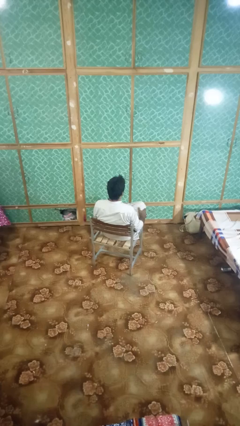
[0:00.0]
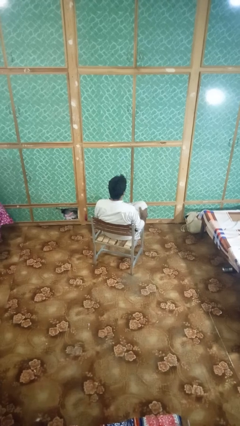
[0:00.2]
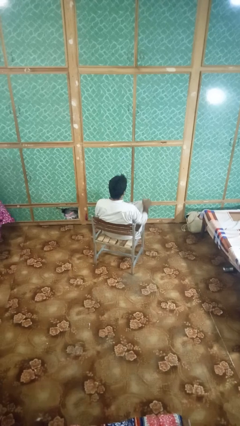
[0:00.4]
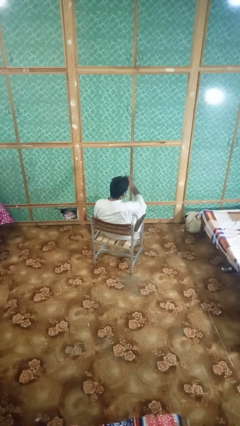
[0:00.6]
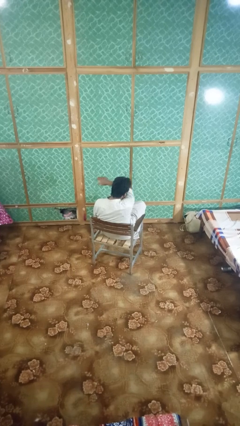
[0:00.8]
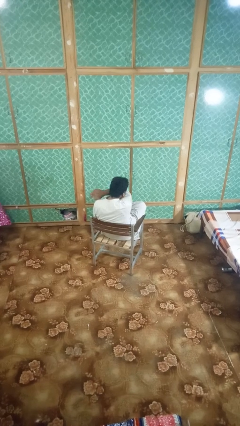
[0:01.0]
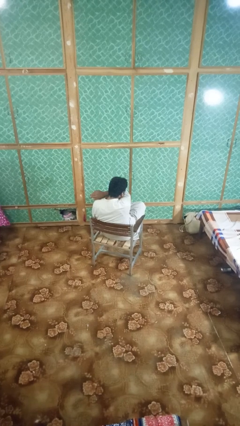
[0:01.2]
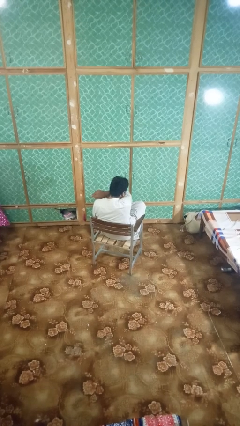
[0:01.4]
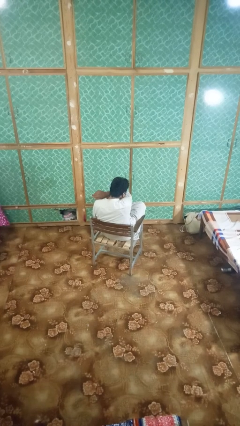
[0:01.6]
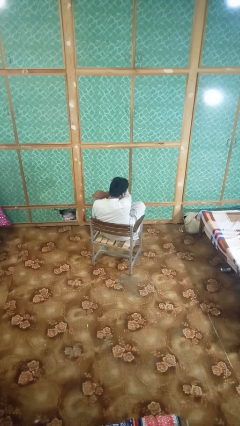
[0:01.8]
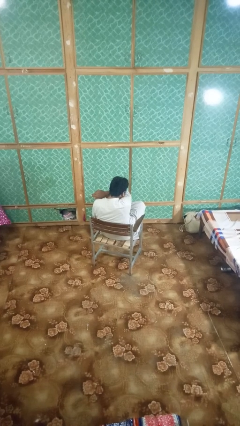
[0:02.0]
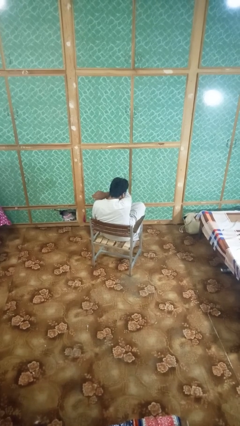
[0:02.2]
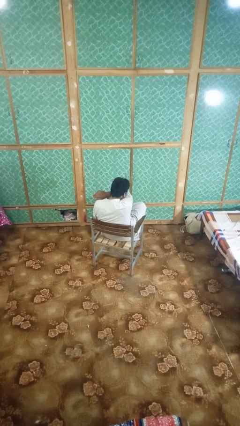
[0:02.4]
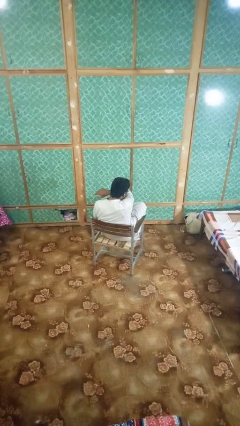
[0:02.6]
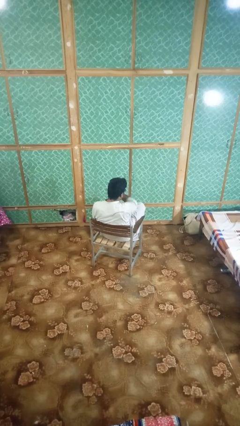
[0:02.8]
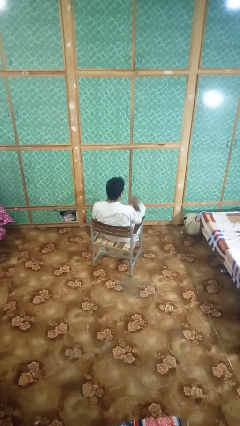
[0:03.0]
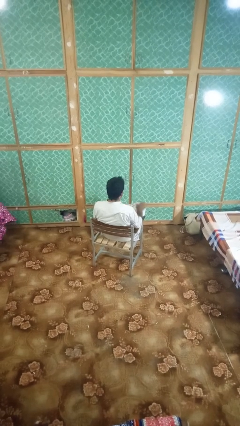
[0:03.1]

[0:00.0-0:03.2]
person sneezes into arm

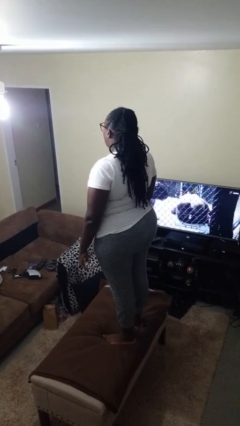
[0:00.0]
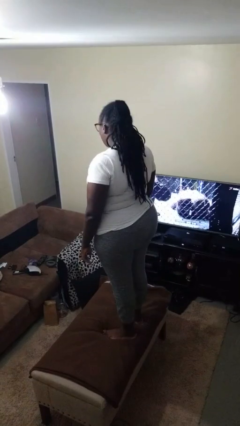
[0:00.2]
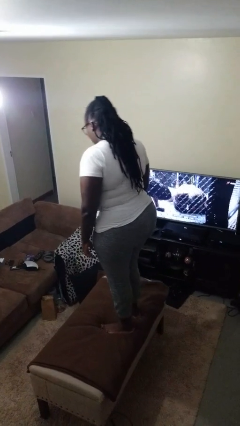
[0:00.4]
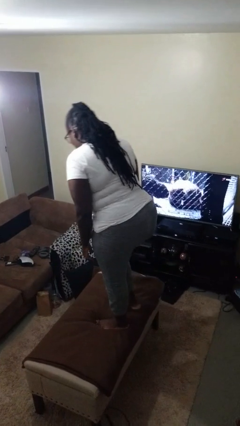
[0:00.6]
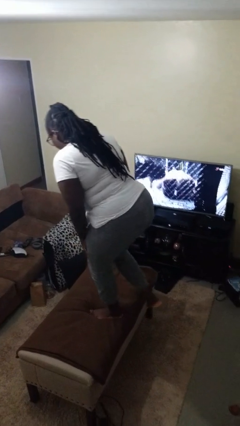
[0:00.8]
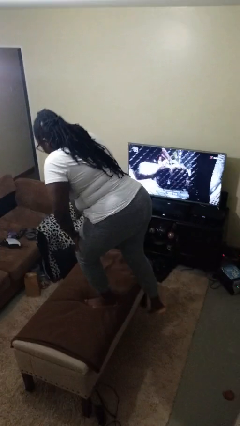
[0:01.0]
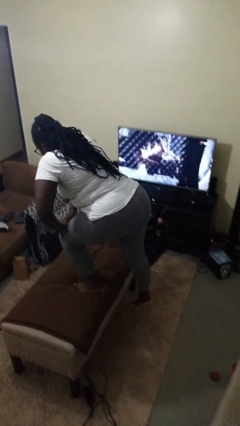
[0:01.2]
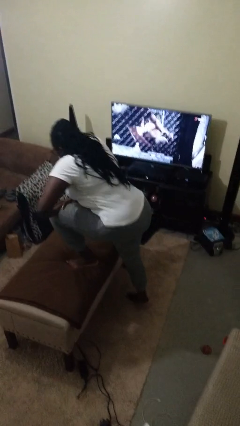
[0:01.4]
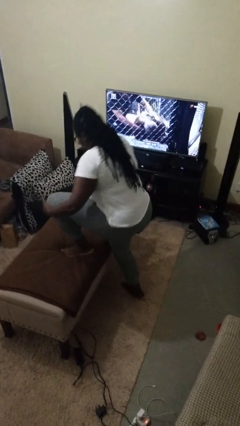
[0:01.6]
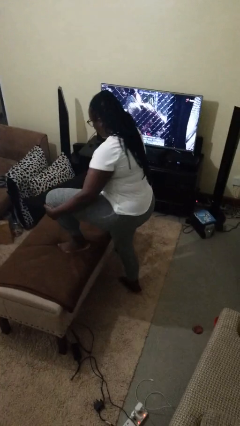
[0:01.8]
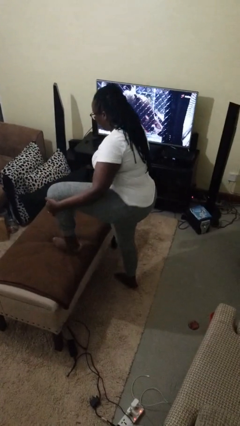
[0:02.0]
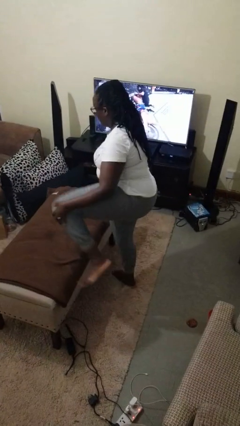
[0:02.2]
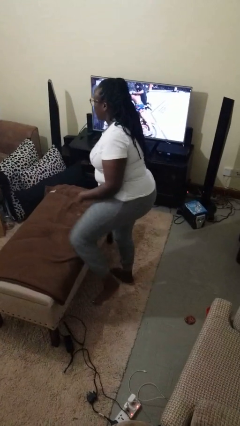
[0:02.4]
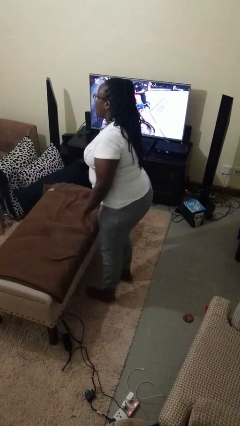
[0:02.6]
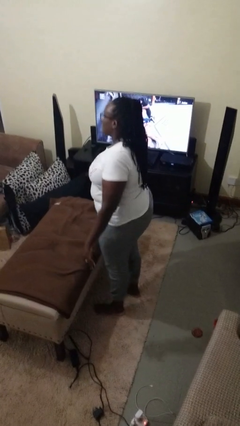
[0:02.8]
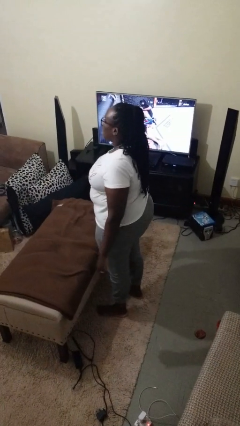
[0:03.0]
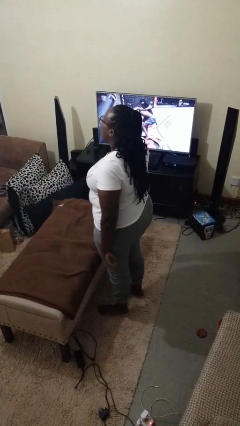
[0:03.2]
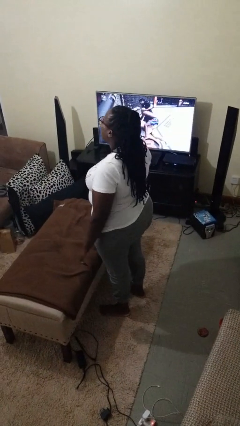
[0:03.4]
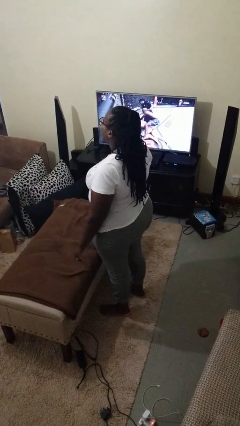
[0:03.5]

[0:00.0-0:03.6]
person climbs off table

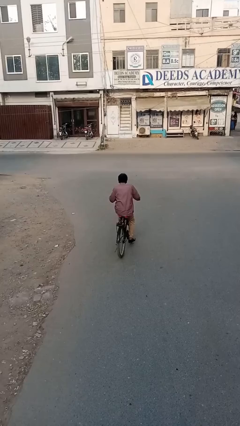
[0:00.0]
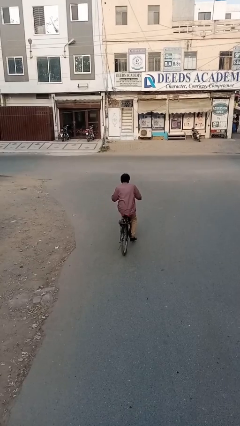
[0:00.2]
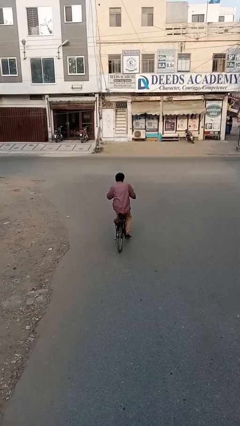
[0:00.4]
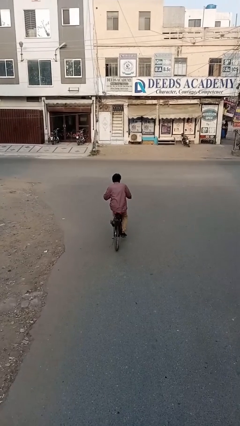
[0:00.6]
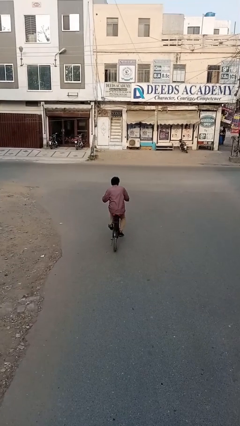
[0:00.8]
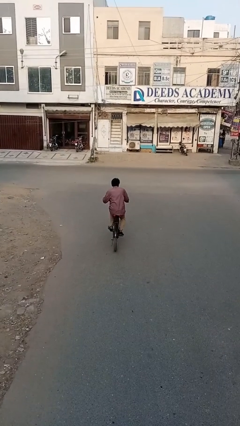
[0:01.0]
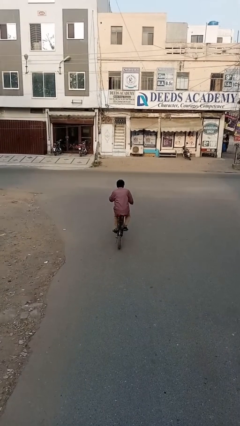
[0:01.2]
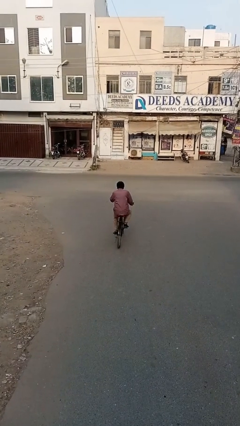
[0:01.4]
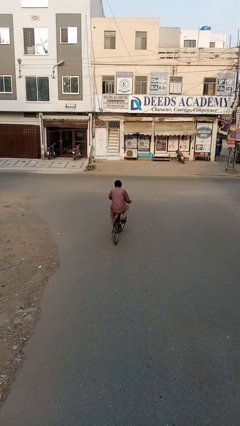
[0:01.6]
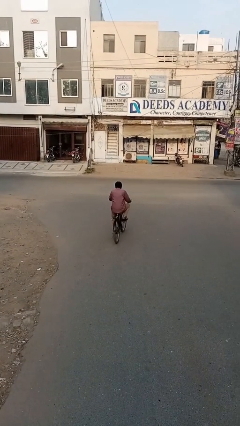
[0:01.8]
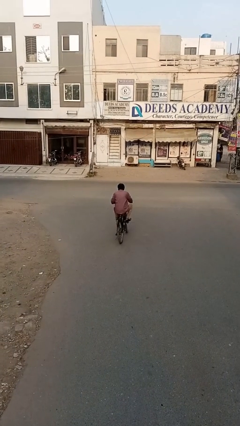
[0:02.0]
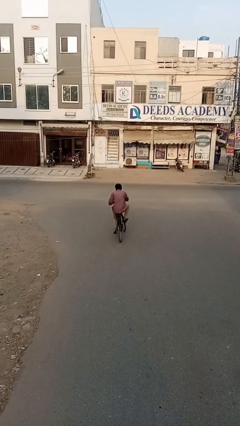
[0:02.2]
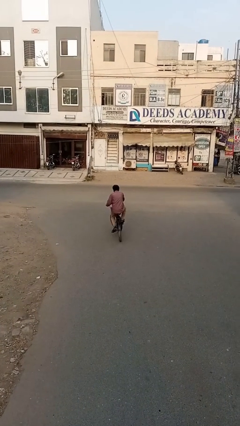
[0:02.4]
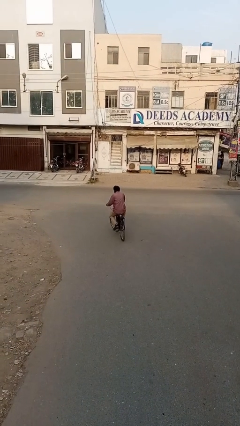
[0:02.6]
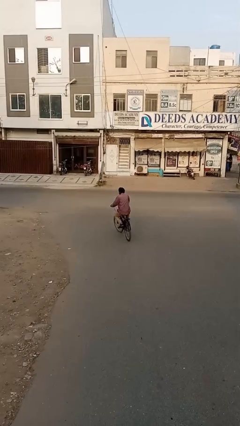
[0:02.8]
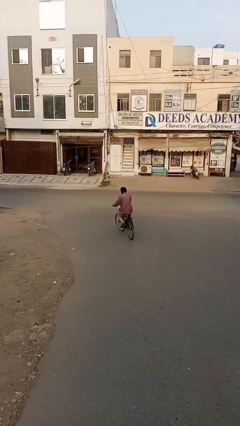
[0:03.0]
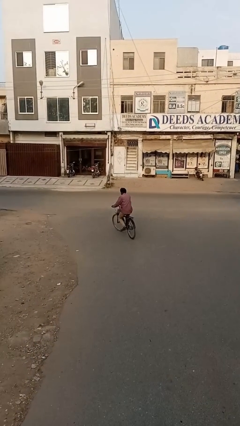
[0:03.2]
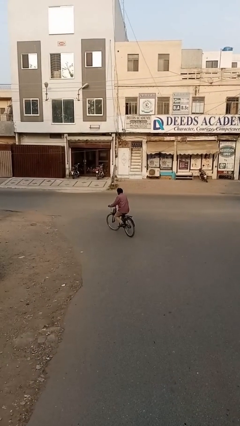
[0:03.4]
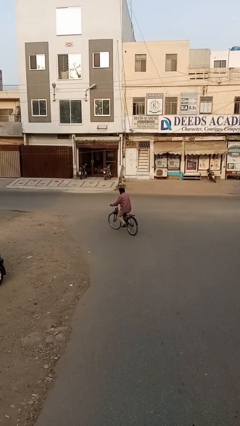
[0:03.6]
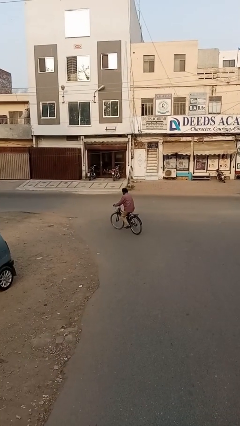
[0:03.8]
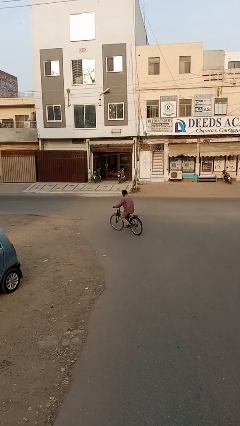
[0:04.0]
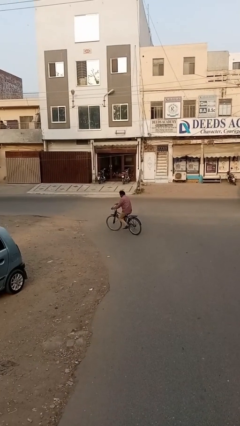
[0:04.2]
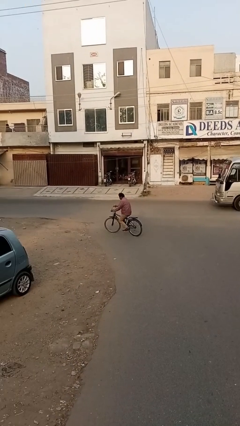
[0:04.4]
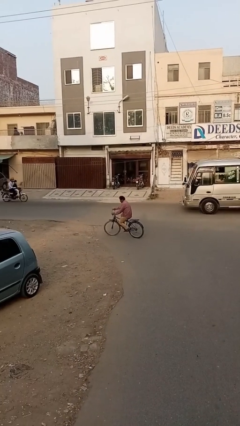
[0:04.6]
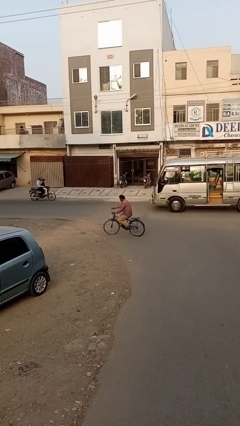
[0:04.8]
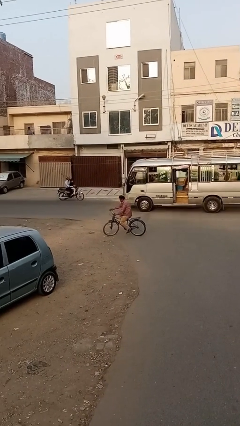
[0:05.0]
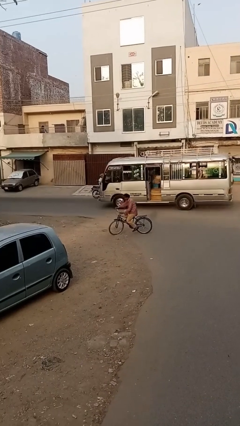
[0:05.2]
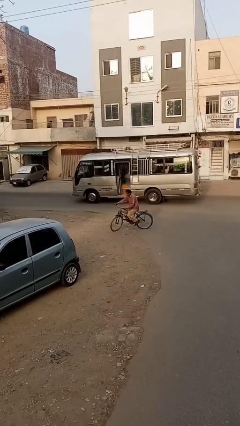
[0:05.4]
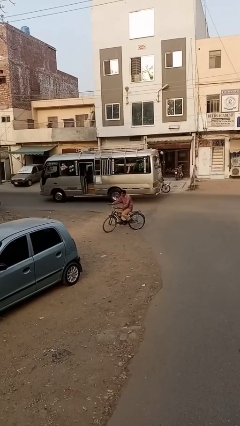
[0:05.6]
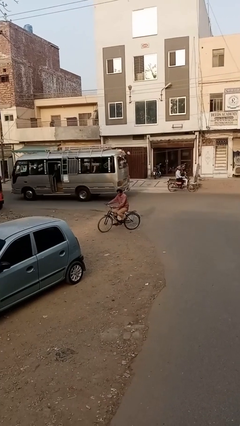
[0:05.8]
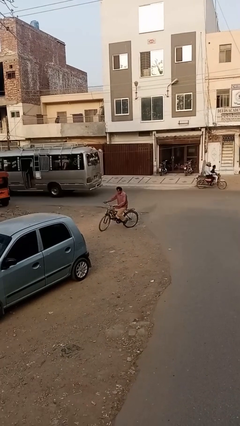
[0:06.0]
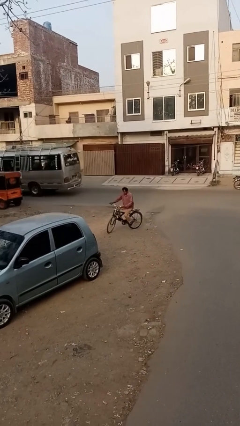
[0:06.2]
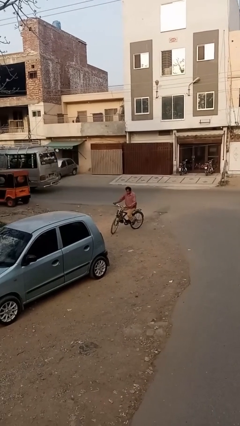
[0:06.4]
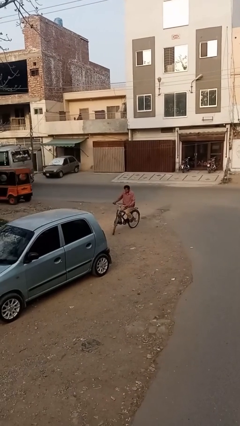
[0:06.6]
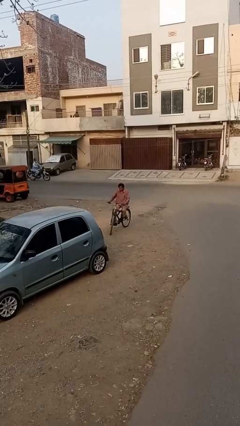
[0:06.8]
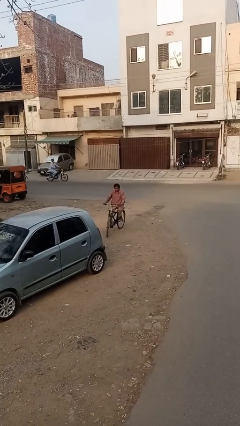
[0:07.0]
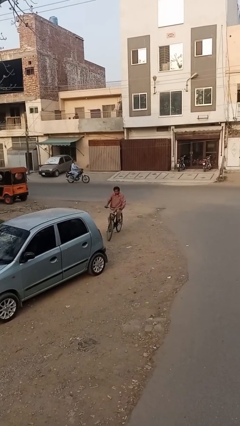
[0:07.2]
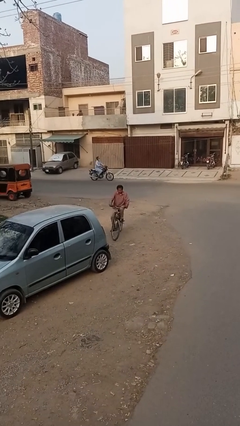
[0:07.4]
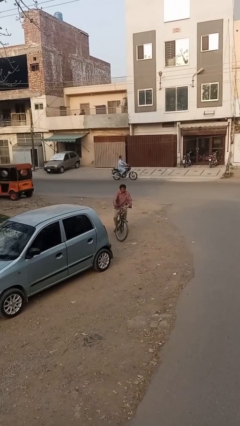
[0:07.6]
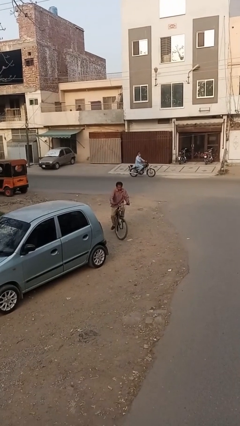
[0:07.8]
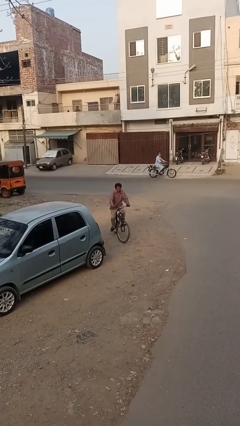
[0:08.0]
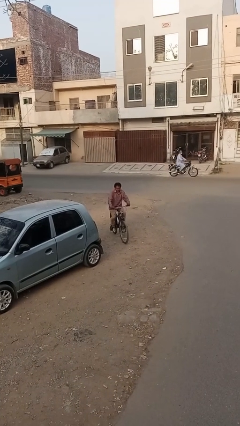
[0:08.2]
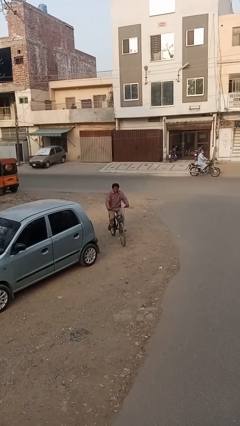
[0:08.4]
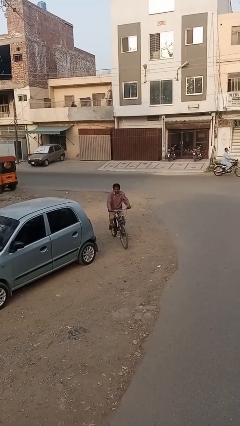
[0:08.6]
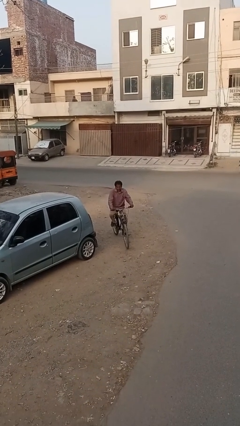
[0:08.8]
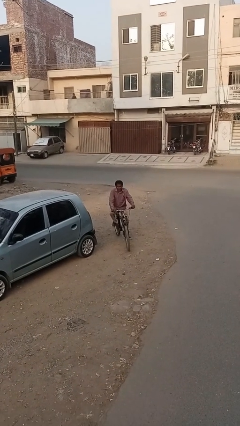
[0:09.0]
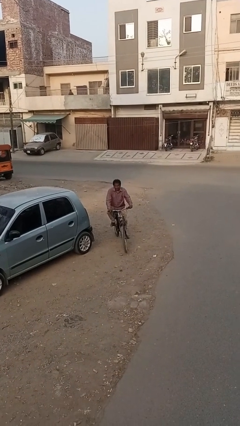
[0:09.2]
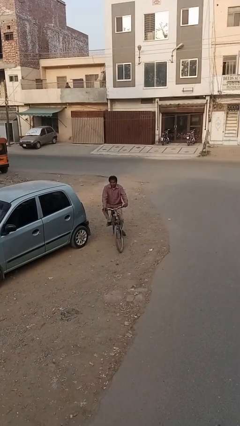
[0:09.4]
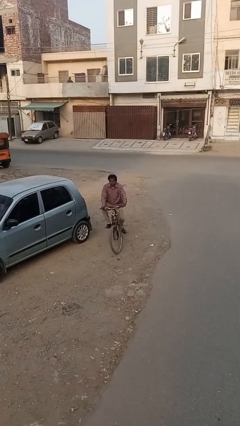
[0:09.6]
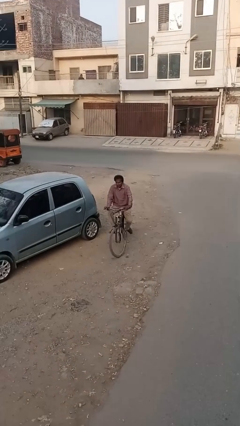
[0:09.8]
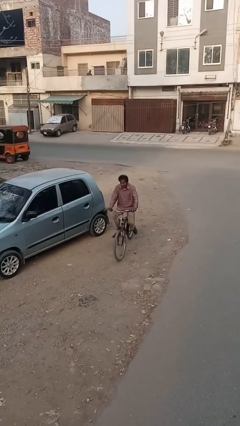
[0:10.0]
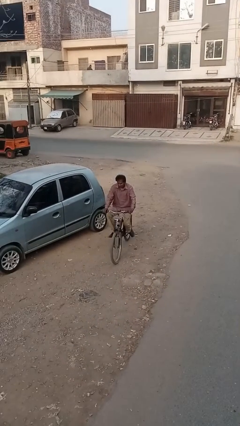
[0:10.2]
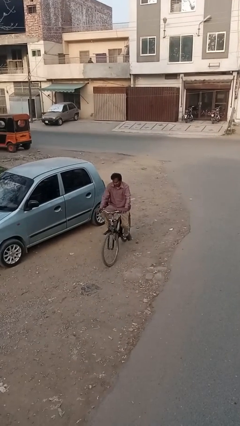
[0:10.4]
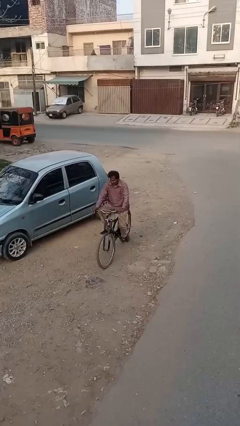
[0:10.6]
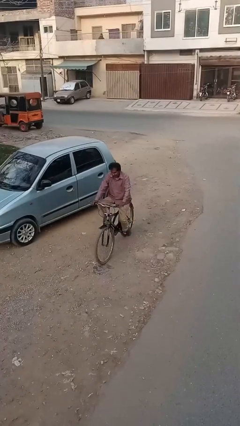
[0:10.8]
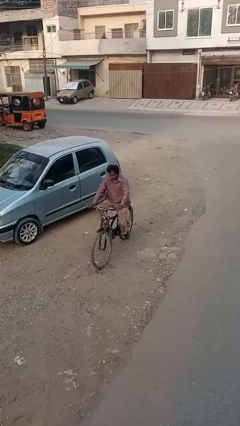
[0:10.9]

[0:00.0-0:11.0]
person rides bicycle

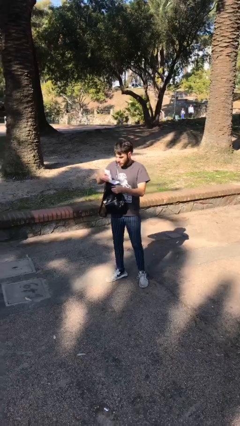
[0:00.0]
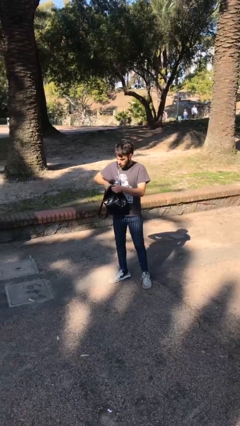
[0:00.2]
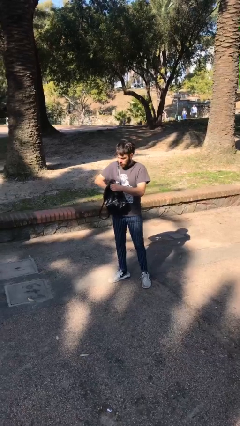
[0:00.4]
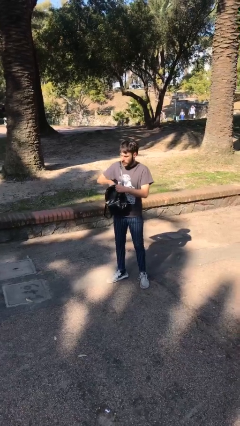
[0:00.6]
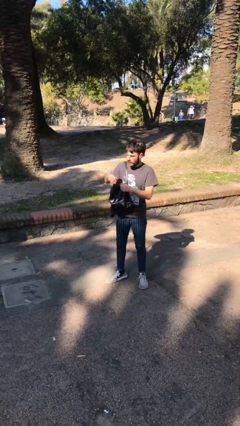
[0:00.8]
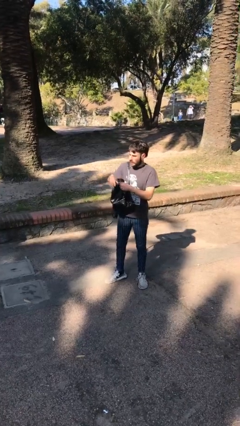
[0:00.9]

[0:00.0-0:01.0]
person puts object into backpack
